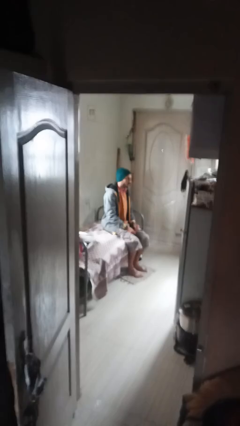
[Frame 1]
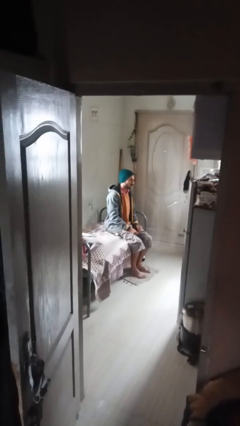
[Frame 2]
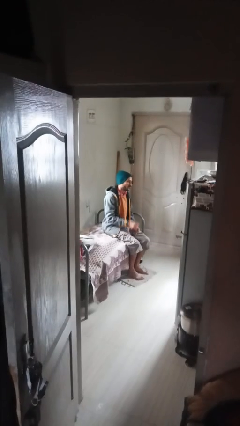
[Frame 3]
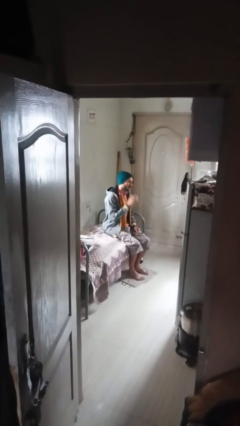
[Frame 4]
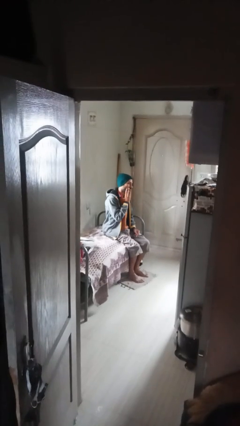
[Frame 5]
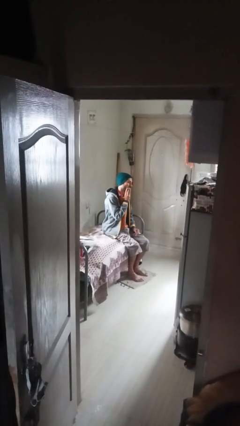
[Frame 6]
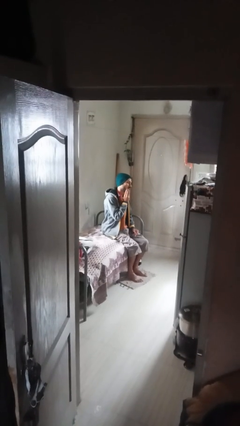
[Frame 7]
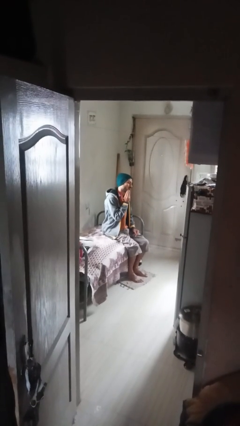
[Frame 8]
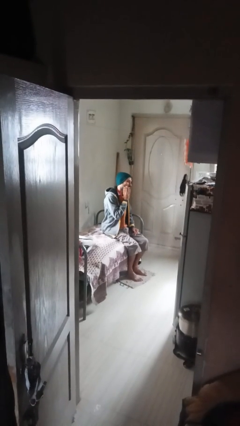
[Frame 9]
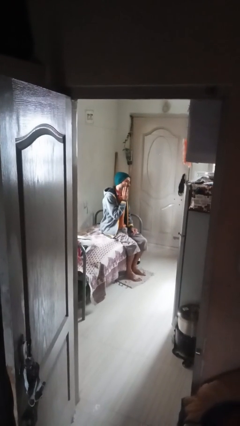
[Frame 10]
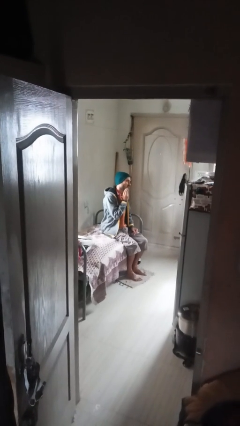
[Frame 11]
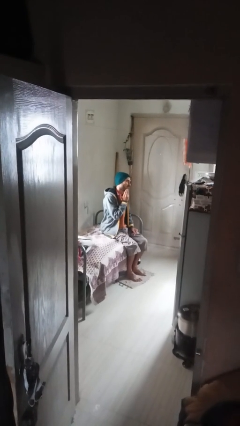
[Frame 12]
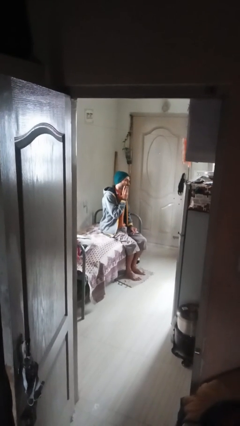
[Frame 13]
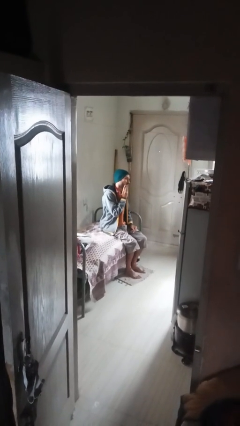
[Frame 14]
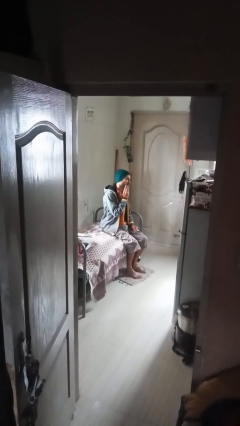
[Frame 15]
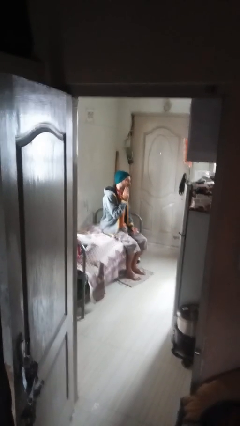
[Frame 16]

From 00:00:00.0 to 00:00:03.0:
person strokes chin

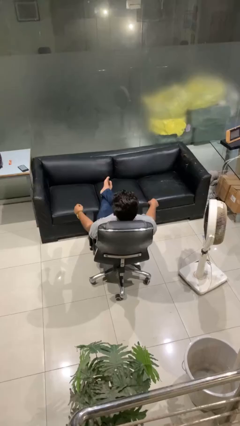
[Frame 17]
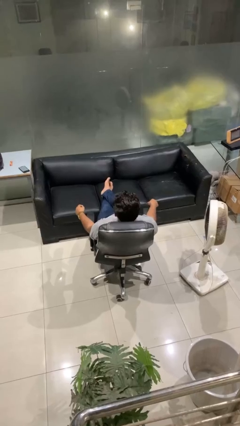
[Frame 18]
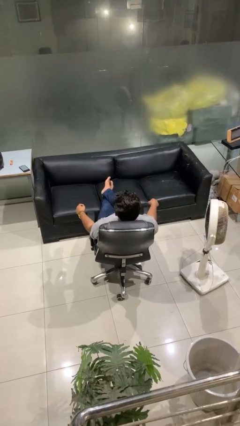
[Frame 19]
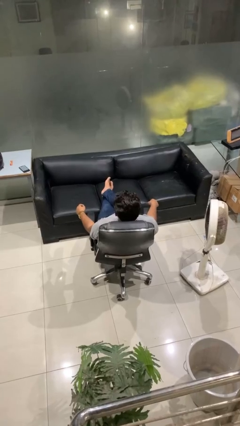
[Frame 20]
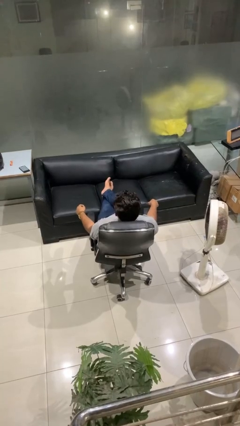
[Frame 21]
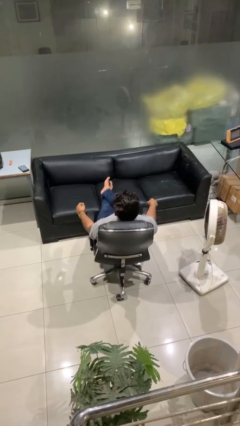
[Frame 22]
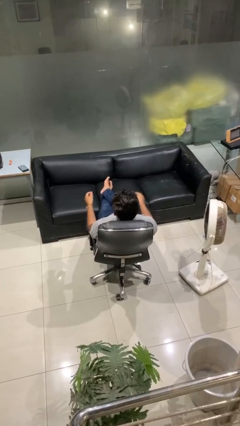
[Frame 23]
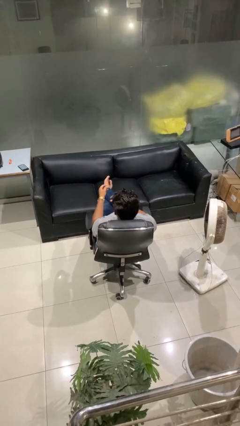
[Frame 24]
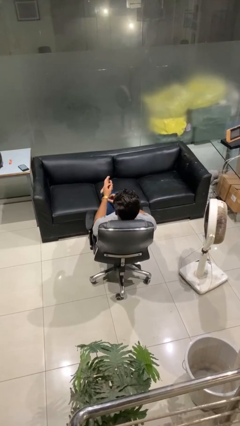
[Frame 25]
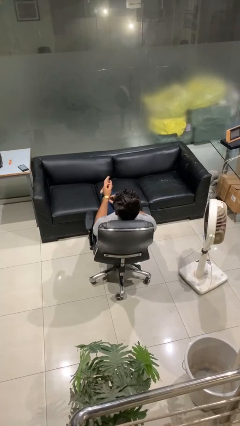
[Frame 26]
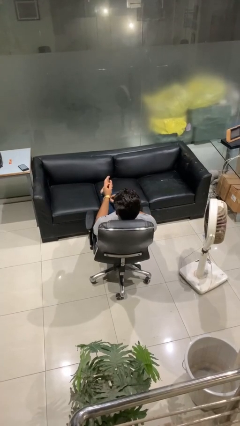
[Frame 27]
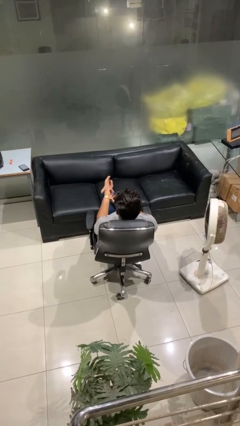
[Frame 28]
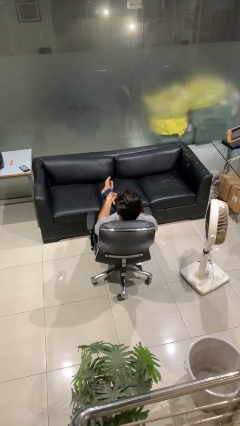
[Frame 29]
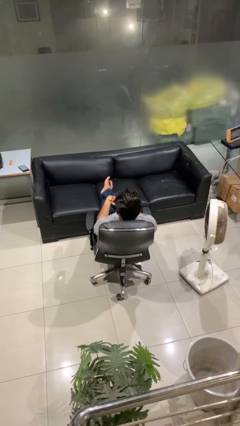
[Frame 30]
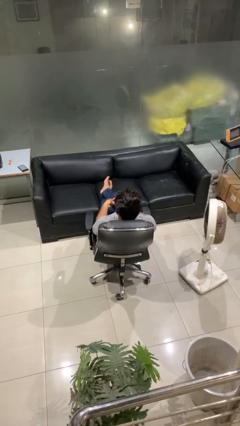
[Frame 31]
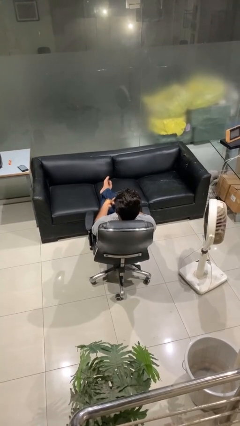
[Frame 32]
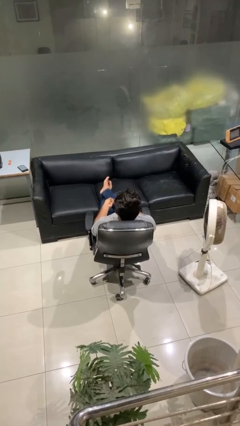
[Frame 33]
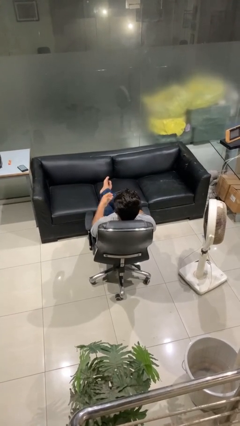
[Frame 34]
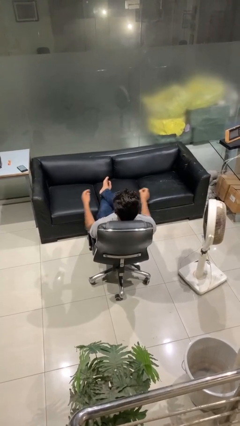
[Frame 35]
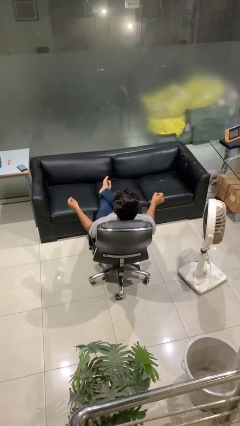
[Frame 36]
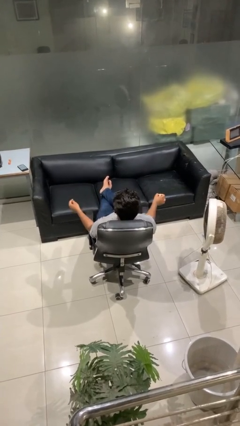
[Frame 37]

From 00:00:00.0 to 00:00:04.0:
person takes off wristwatch

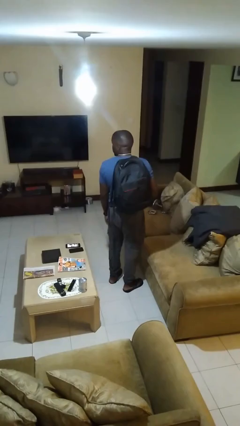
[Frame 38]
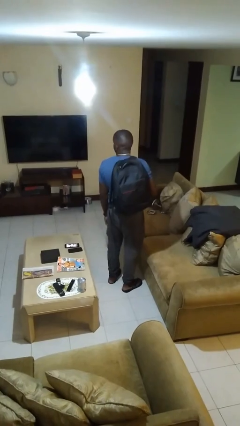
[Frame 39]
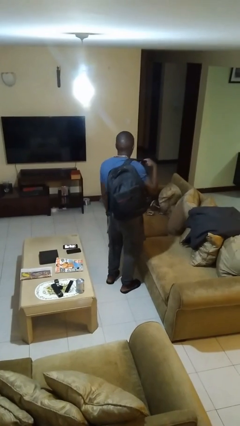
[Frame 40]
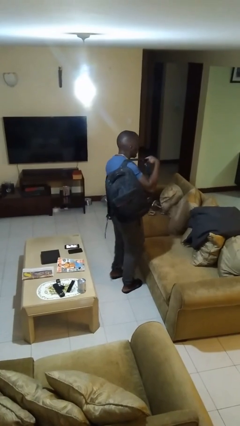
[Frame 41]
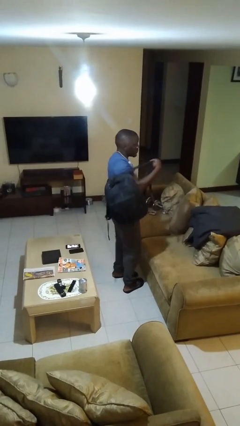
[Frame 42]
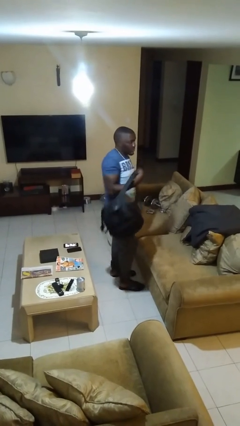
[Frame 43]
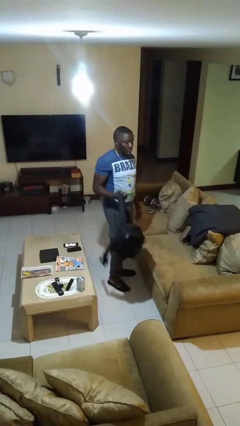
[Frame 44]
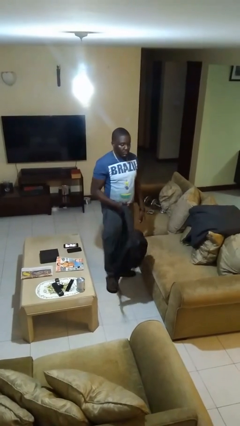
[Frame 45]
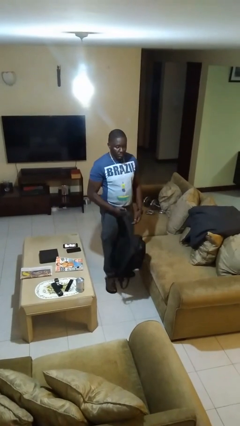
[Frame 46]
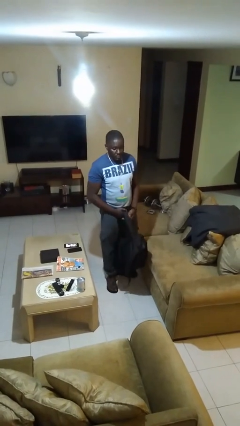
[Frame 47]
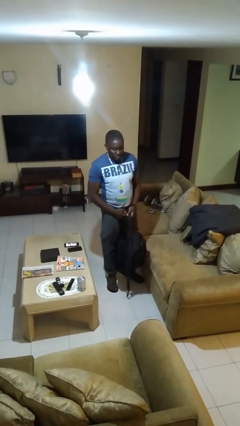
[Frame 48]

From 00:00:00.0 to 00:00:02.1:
person takes off backpack

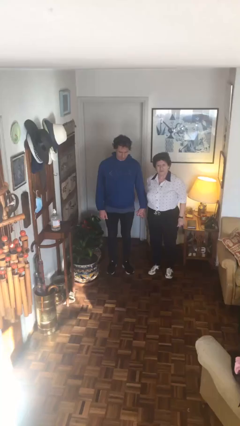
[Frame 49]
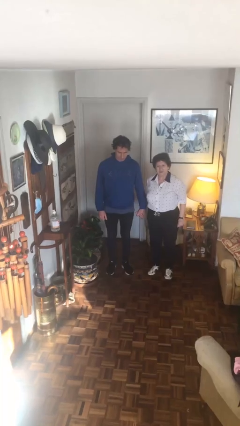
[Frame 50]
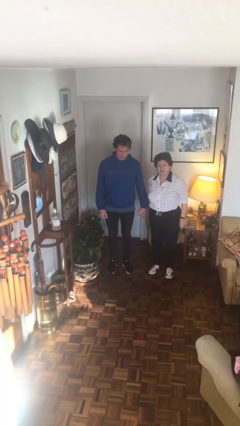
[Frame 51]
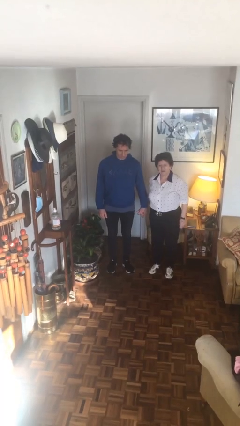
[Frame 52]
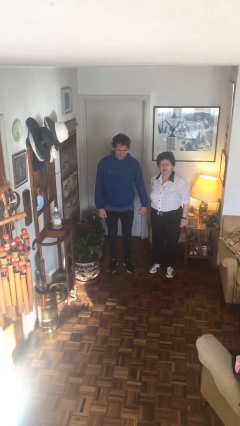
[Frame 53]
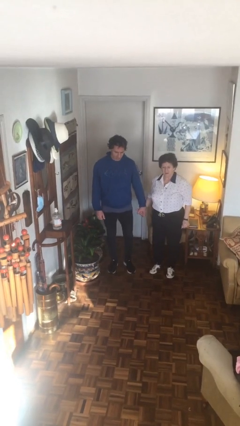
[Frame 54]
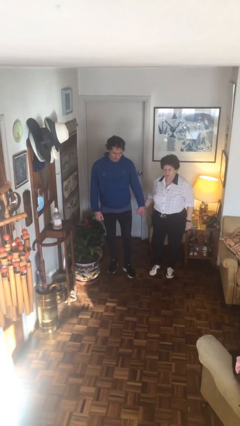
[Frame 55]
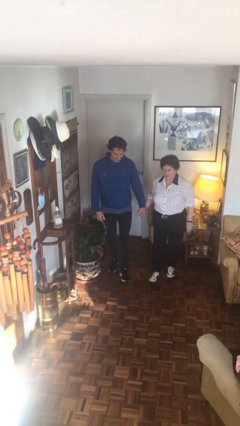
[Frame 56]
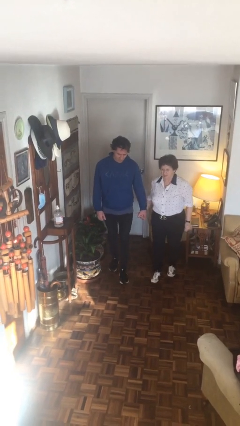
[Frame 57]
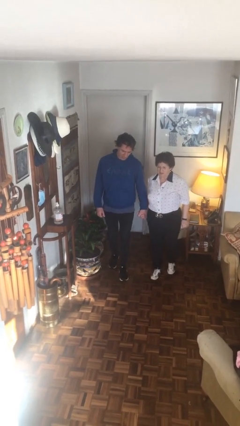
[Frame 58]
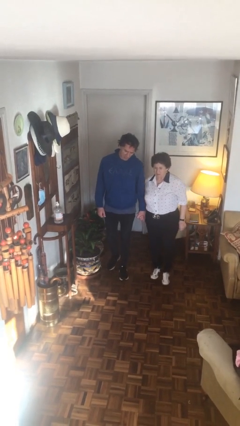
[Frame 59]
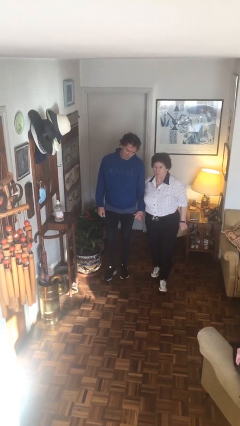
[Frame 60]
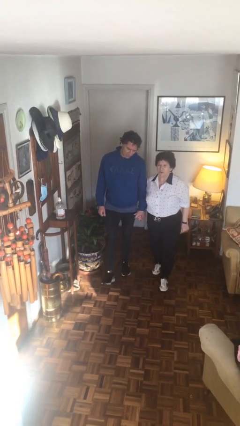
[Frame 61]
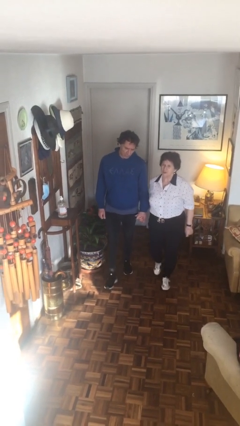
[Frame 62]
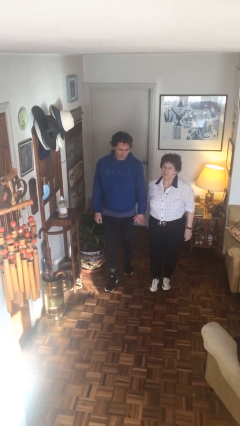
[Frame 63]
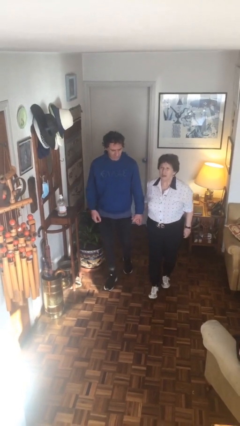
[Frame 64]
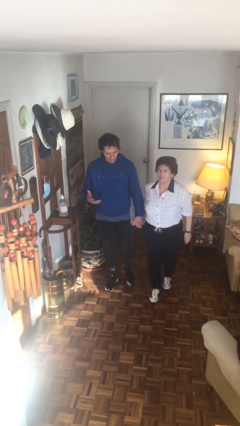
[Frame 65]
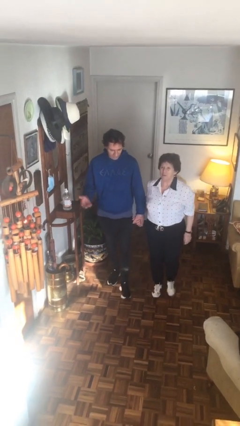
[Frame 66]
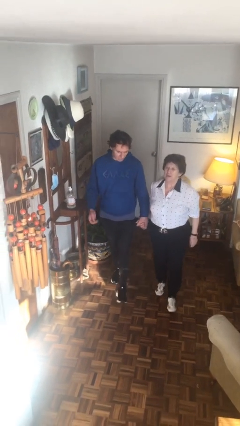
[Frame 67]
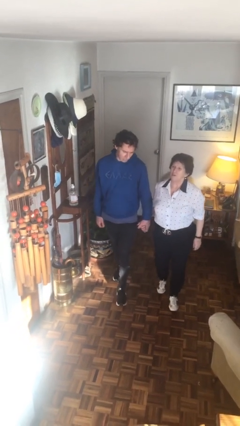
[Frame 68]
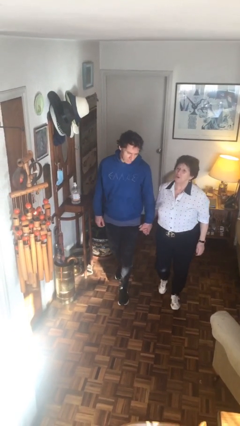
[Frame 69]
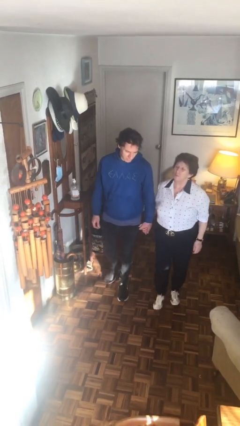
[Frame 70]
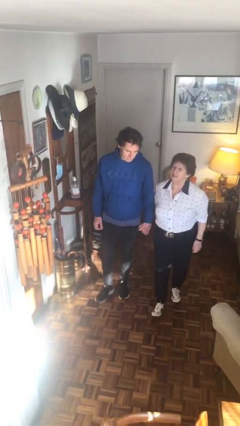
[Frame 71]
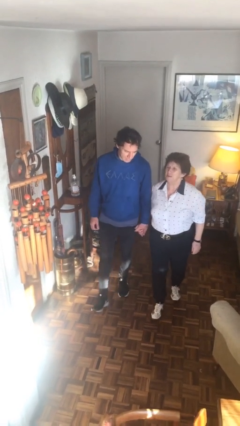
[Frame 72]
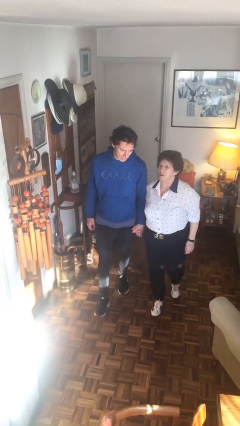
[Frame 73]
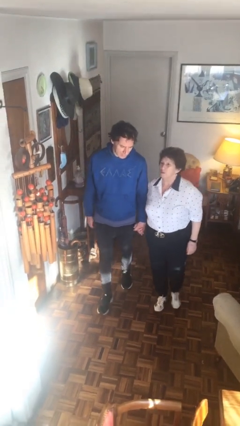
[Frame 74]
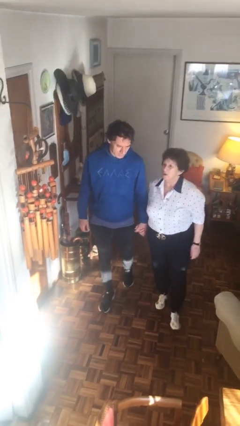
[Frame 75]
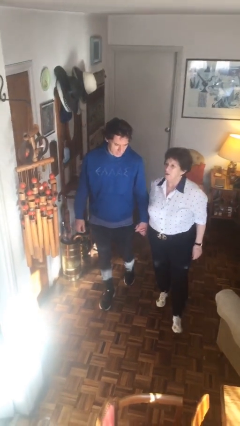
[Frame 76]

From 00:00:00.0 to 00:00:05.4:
person holds hand

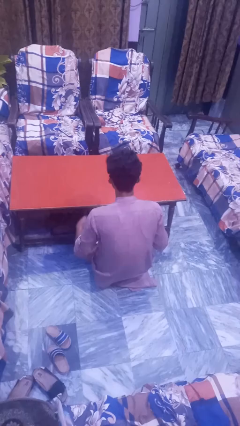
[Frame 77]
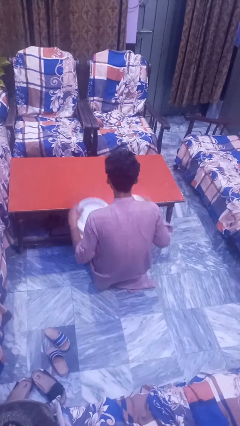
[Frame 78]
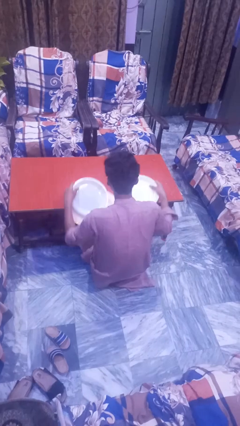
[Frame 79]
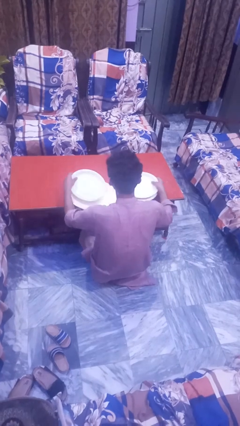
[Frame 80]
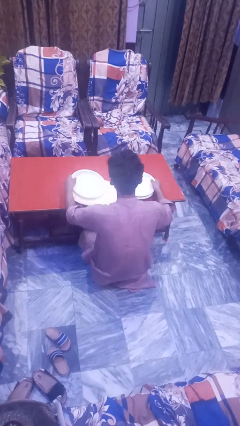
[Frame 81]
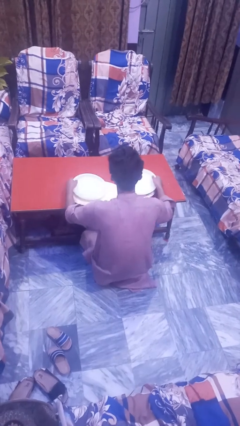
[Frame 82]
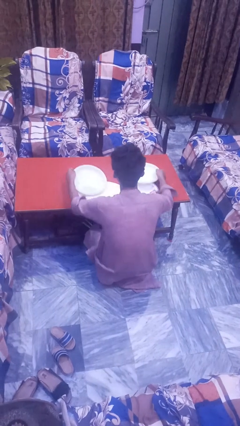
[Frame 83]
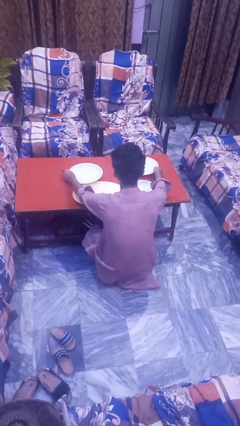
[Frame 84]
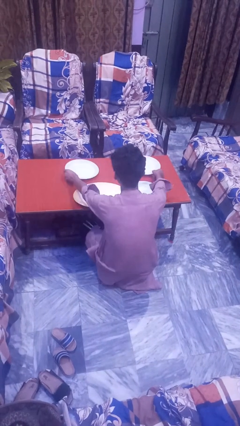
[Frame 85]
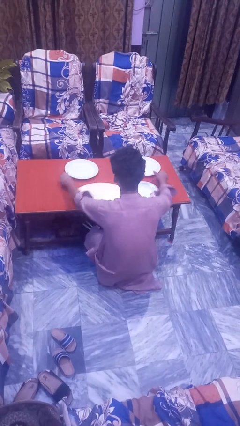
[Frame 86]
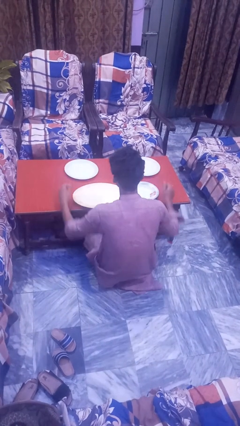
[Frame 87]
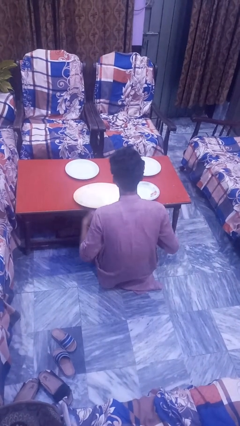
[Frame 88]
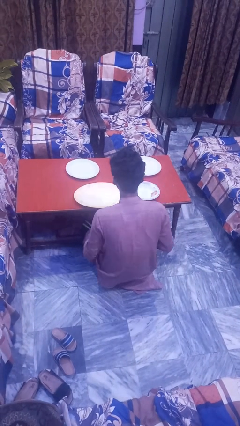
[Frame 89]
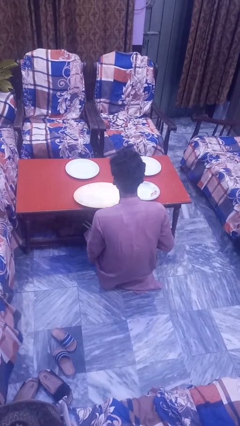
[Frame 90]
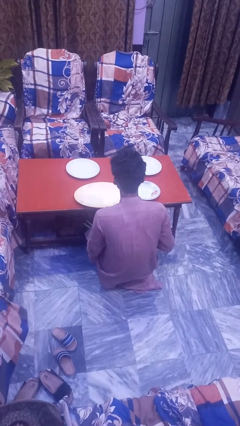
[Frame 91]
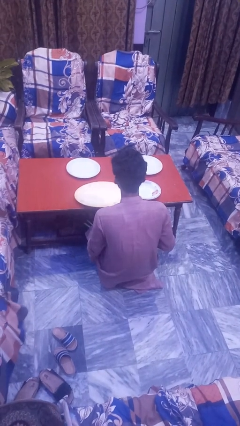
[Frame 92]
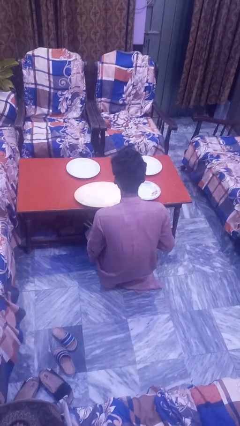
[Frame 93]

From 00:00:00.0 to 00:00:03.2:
person sets table
